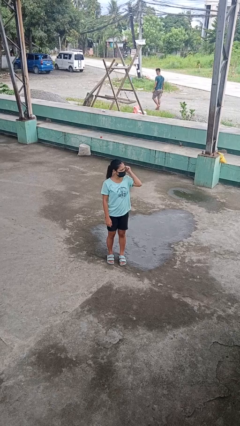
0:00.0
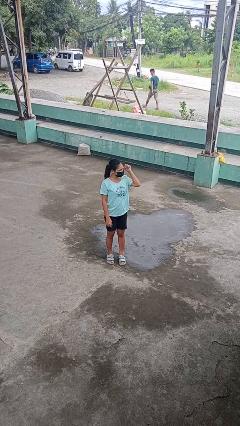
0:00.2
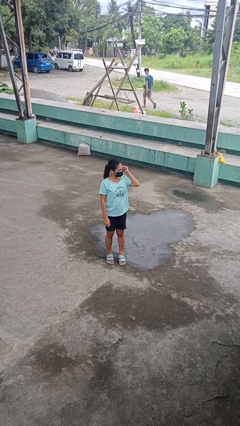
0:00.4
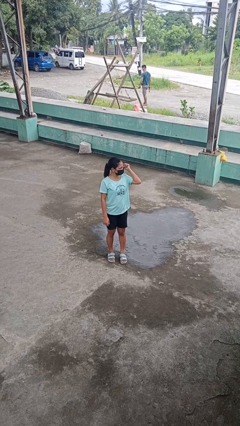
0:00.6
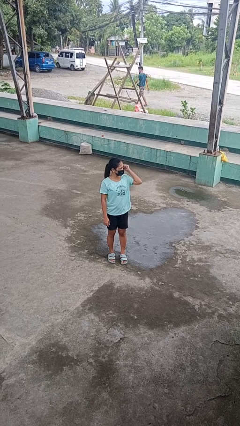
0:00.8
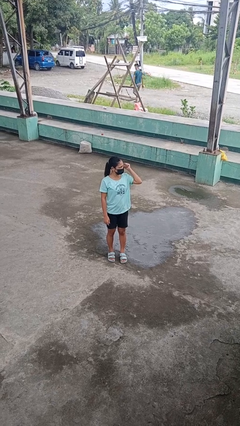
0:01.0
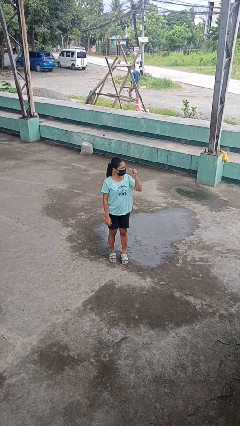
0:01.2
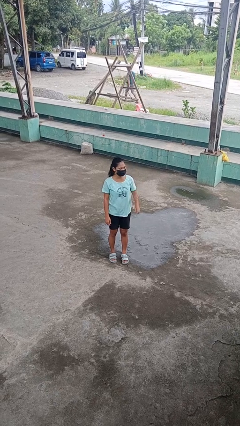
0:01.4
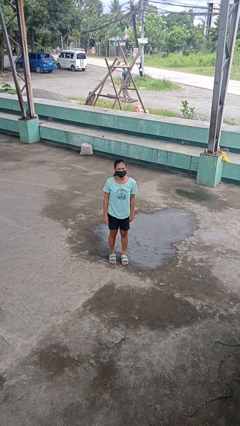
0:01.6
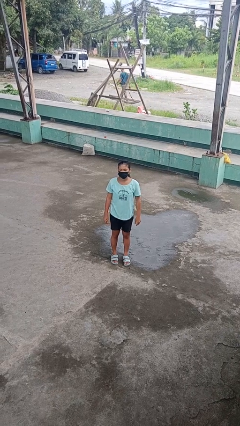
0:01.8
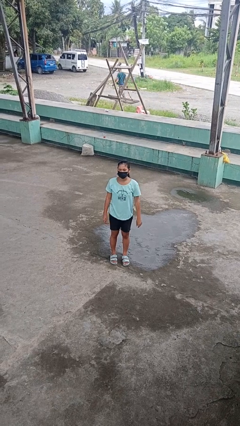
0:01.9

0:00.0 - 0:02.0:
person gestures behind me

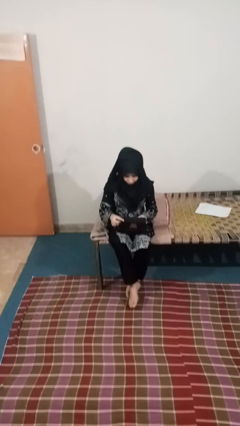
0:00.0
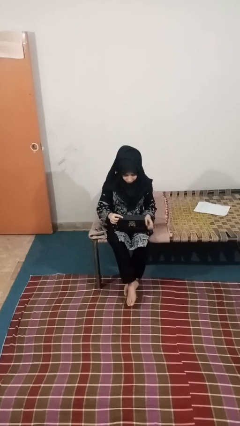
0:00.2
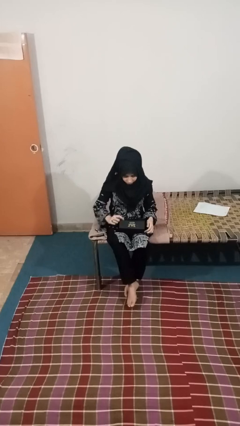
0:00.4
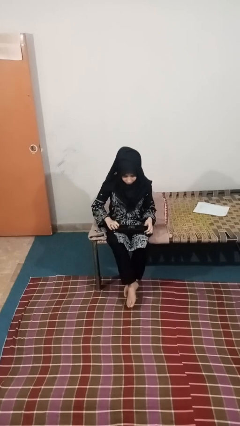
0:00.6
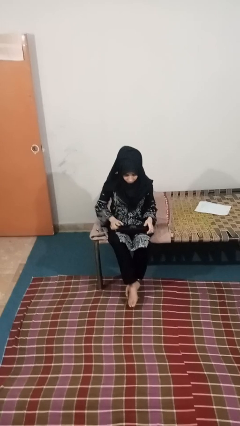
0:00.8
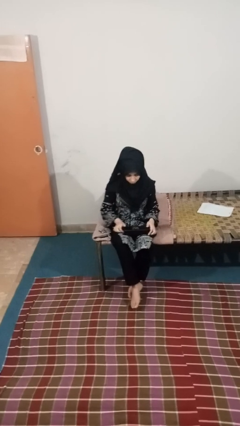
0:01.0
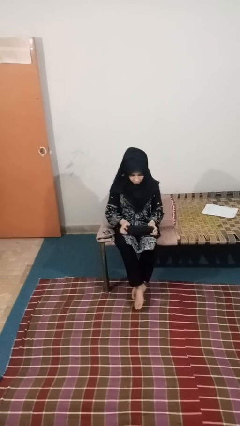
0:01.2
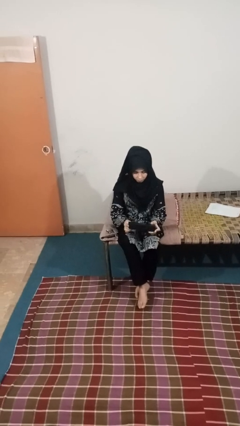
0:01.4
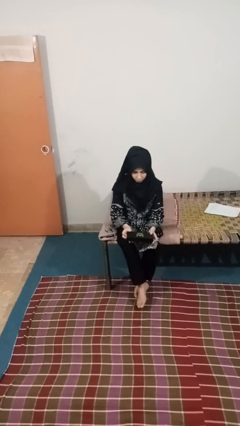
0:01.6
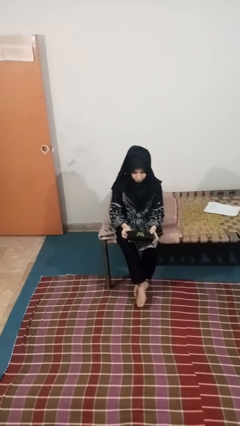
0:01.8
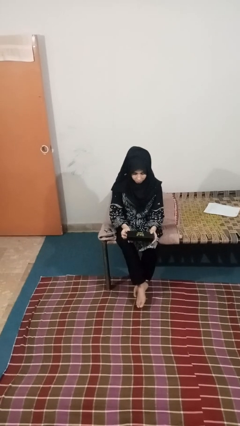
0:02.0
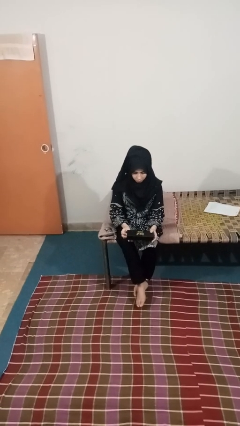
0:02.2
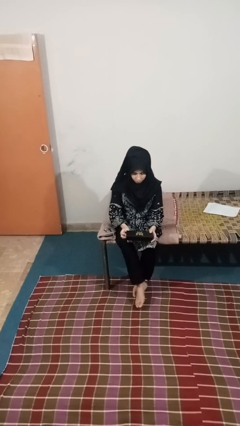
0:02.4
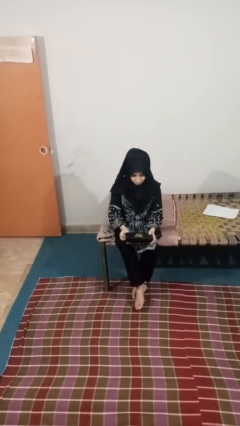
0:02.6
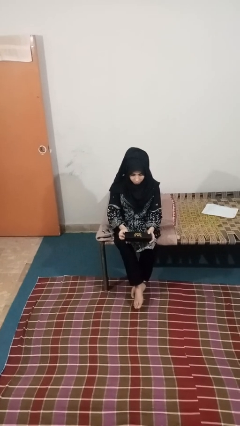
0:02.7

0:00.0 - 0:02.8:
person closes jewelry box

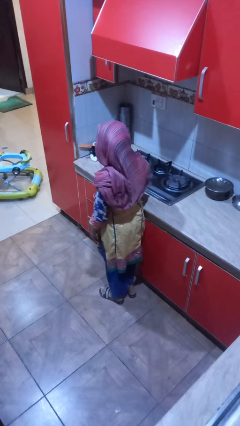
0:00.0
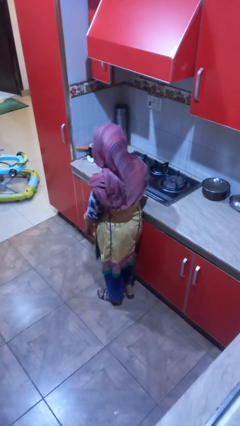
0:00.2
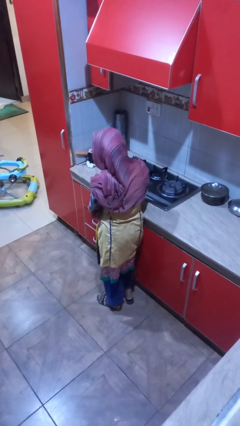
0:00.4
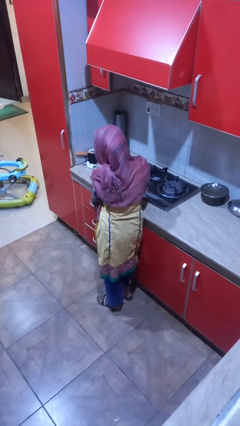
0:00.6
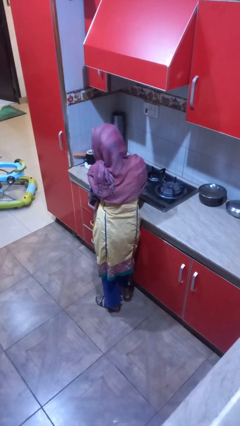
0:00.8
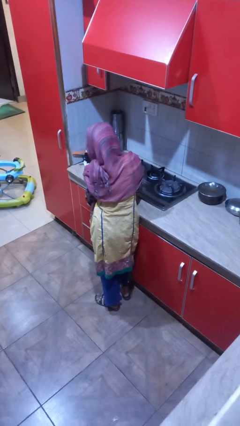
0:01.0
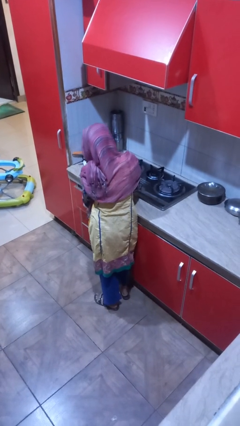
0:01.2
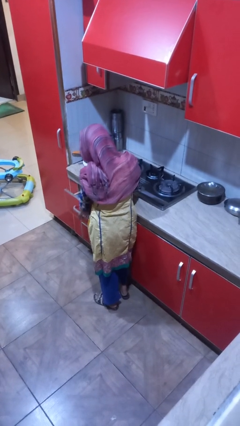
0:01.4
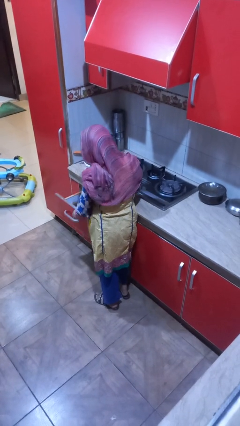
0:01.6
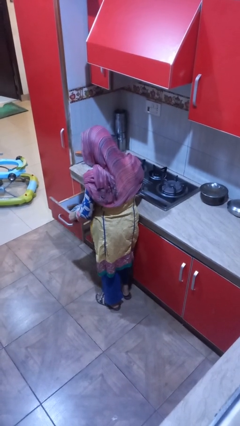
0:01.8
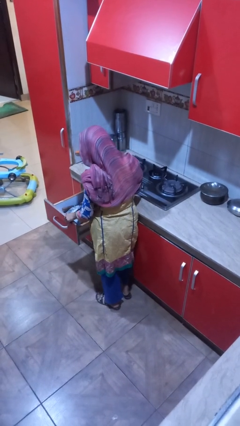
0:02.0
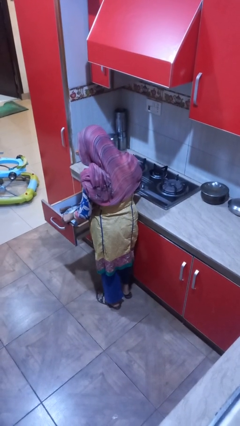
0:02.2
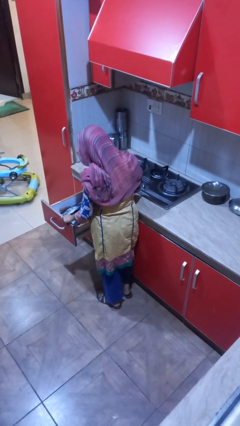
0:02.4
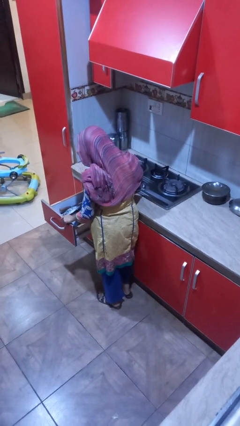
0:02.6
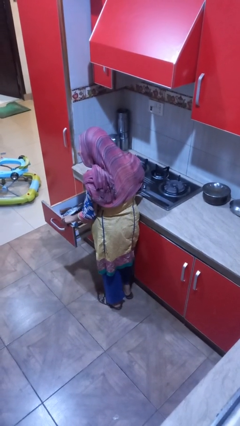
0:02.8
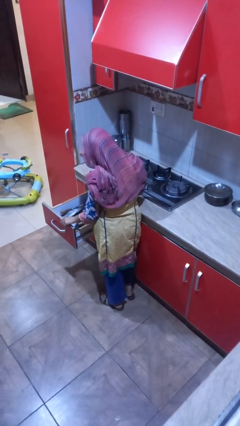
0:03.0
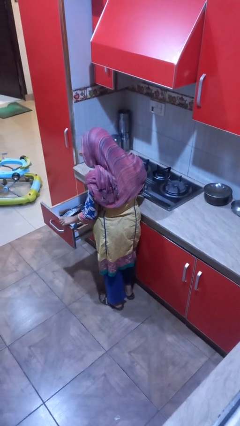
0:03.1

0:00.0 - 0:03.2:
person opens kitchen drawer

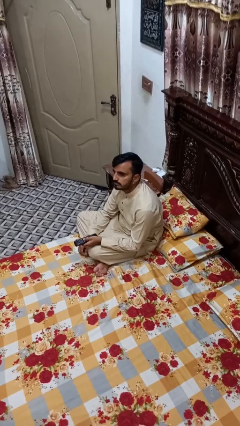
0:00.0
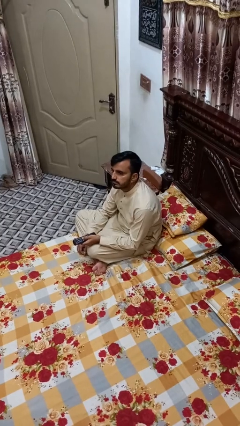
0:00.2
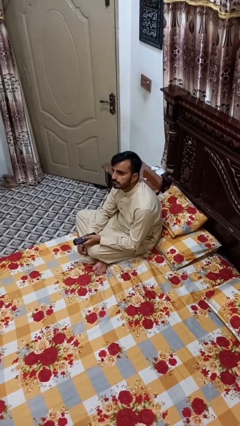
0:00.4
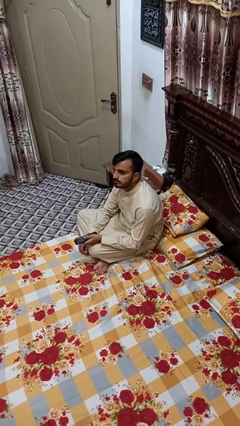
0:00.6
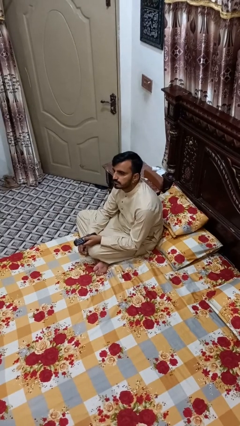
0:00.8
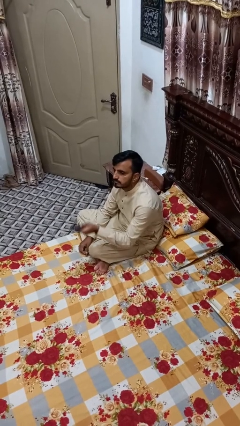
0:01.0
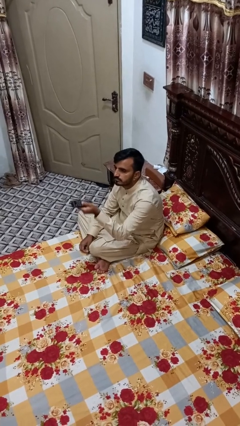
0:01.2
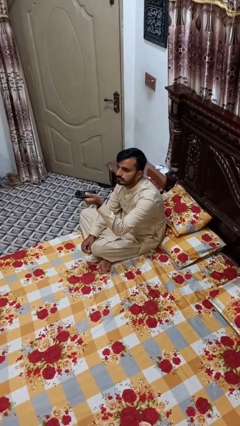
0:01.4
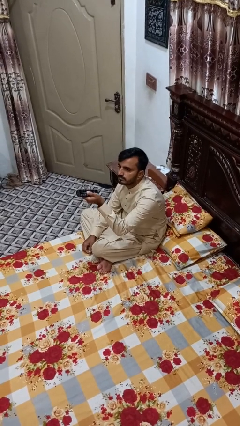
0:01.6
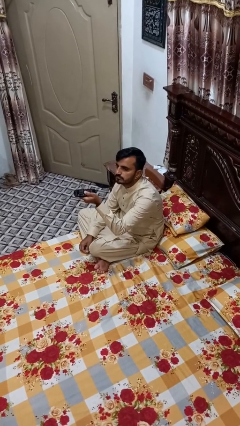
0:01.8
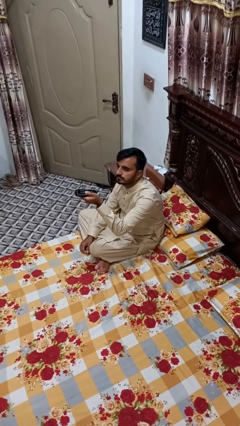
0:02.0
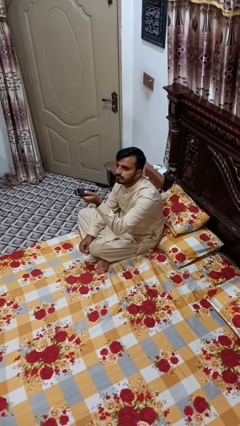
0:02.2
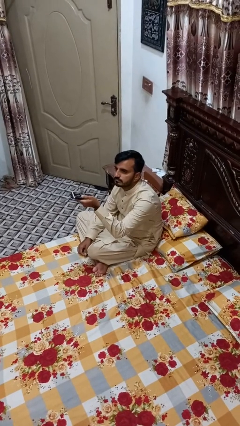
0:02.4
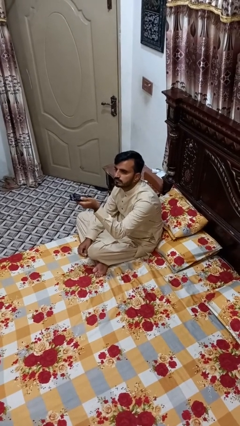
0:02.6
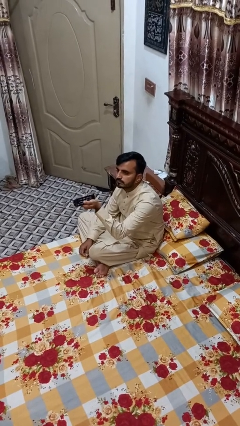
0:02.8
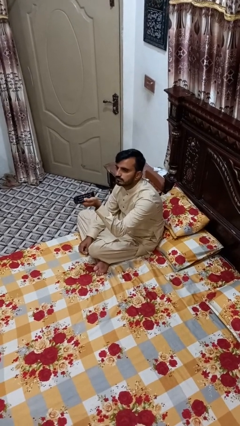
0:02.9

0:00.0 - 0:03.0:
person uses television remote

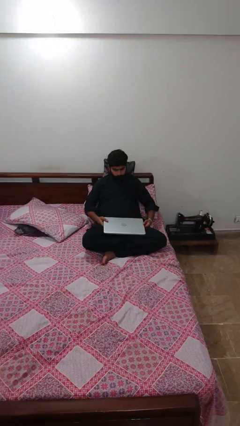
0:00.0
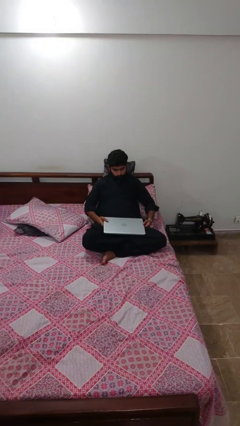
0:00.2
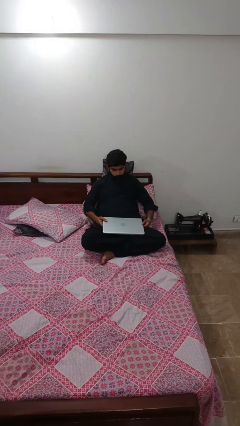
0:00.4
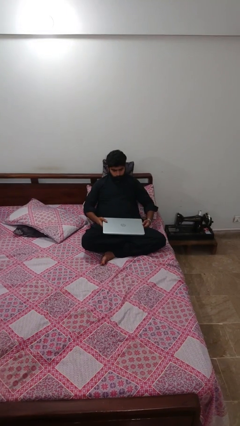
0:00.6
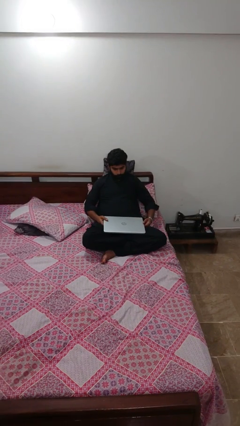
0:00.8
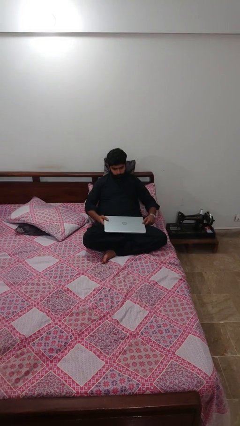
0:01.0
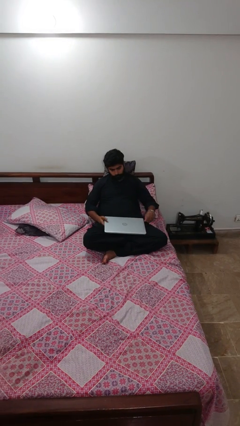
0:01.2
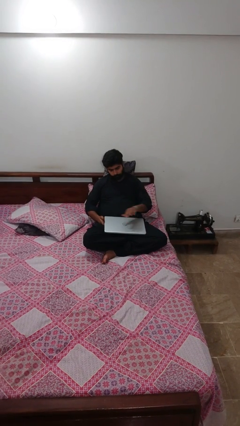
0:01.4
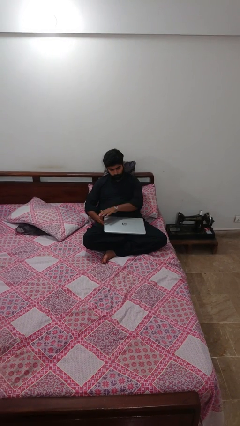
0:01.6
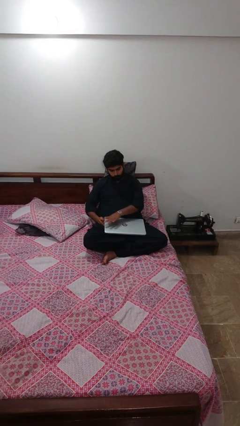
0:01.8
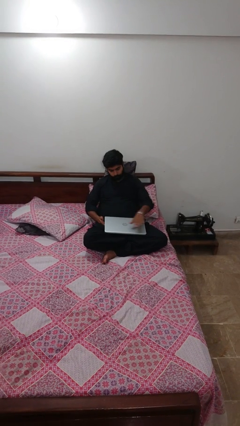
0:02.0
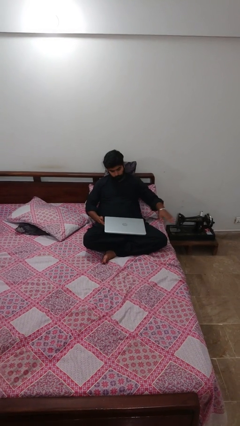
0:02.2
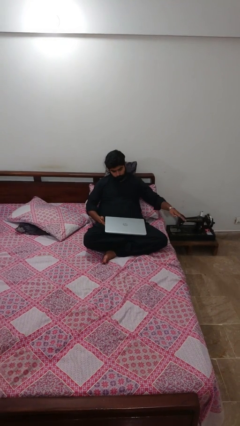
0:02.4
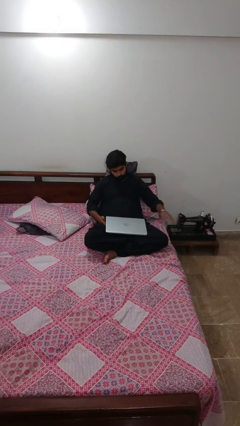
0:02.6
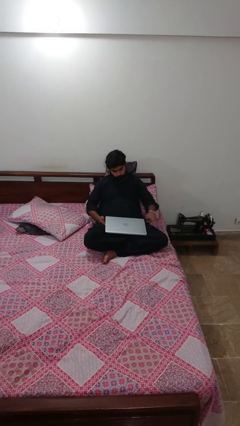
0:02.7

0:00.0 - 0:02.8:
person waves hand over object

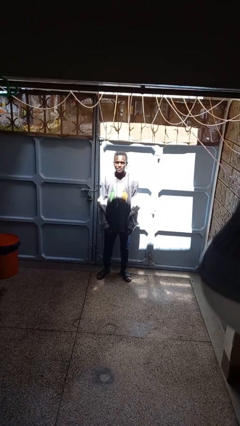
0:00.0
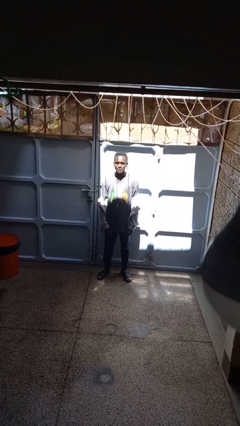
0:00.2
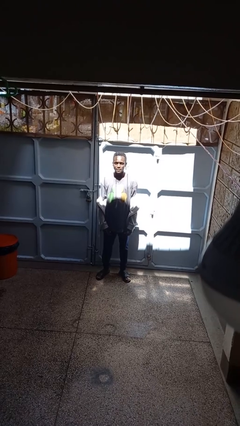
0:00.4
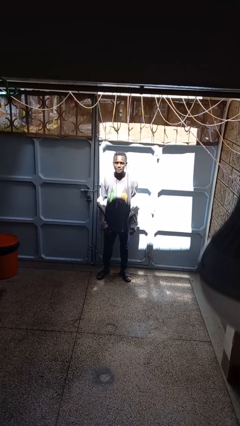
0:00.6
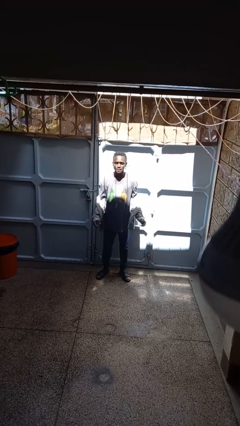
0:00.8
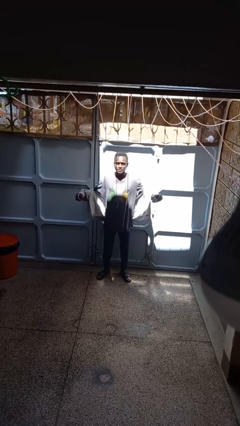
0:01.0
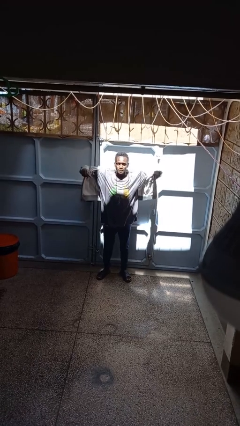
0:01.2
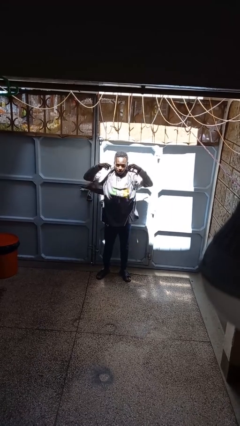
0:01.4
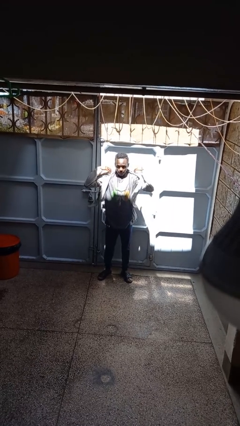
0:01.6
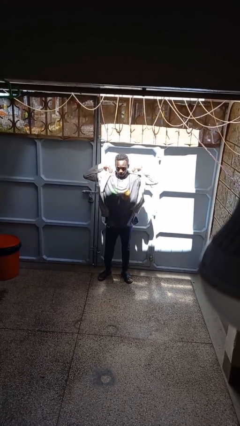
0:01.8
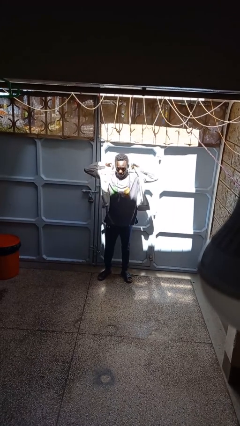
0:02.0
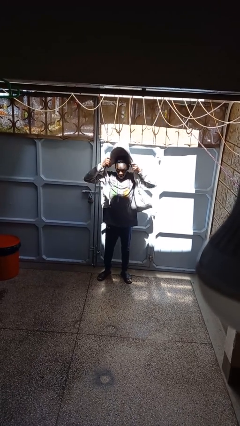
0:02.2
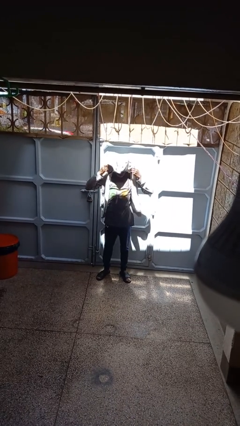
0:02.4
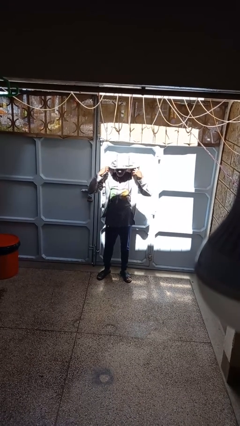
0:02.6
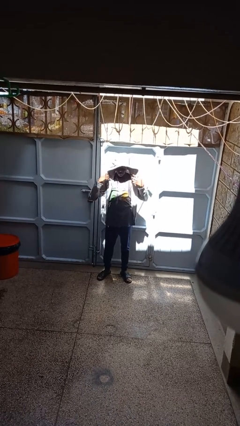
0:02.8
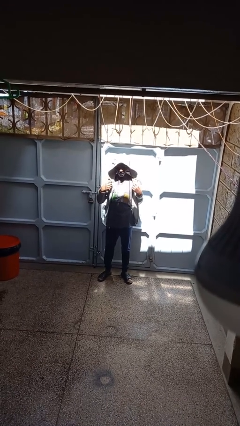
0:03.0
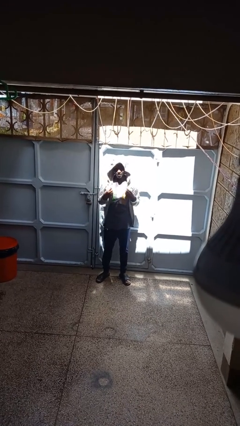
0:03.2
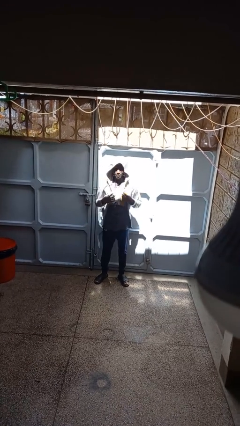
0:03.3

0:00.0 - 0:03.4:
person puts on hoodie
